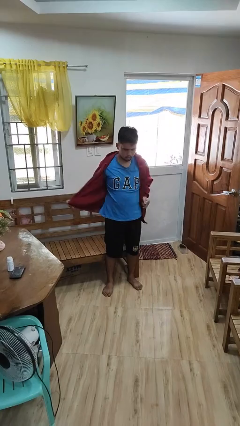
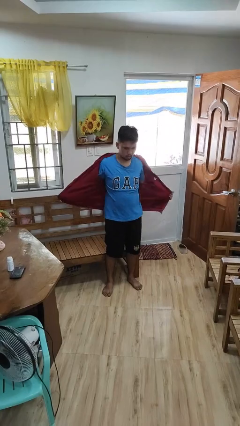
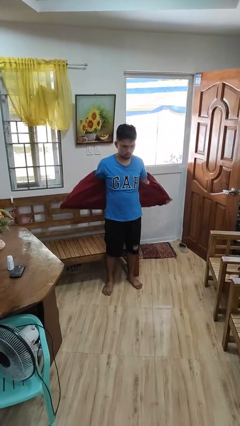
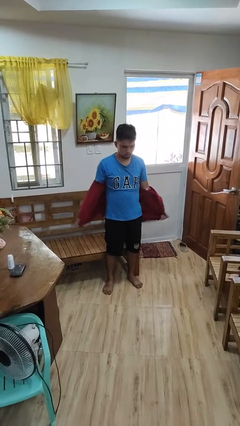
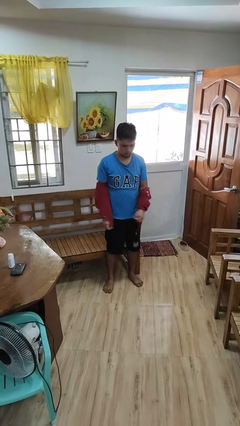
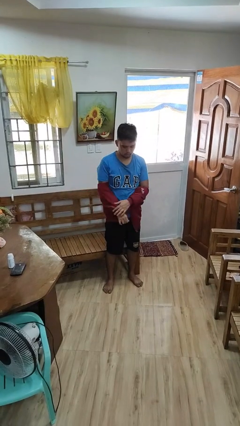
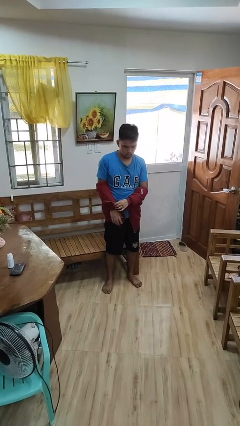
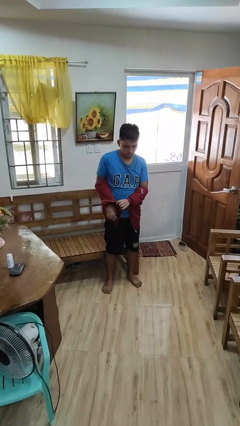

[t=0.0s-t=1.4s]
person takes off jacket

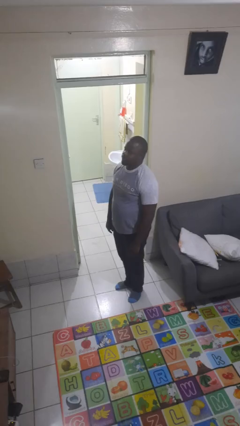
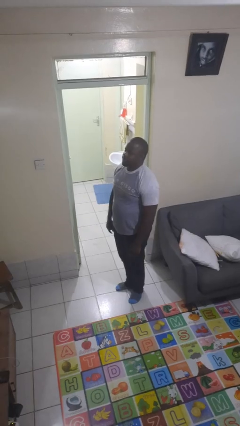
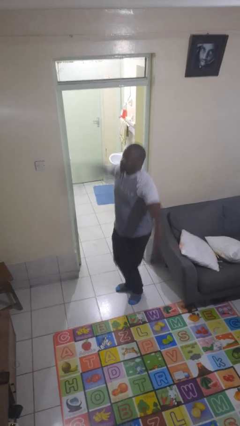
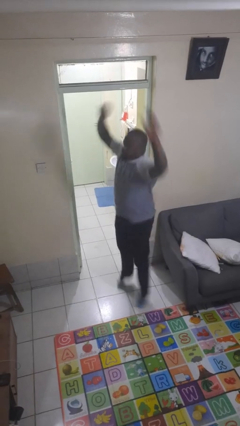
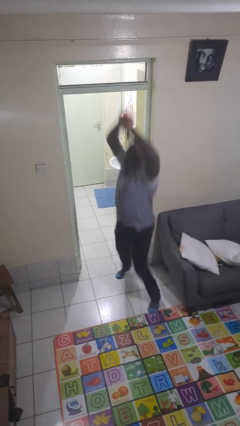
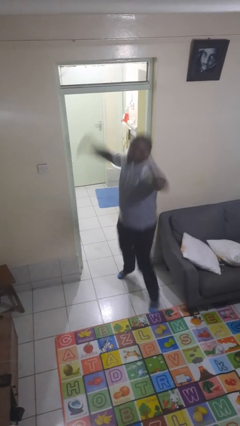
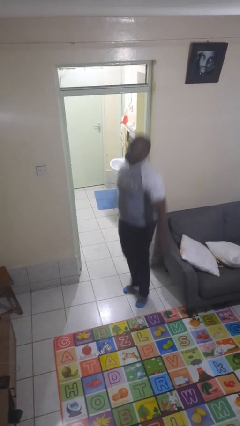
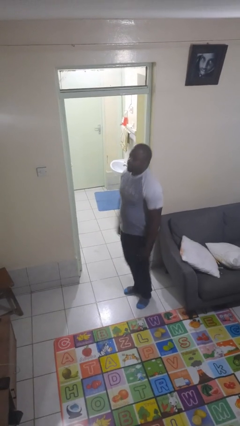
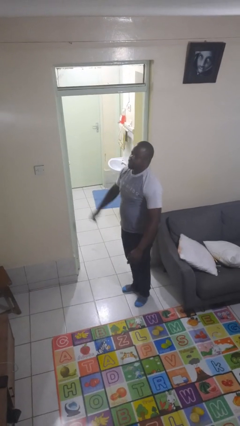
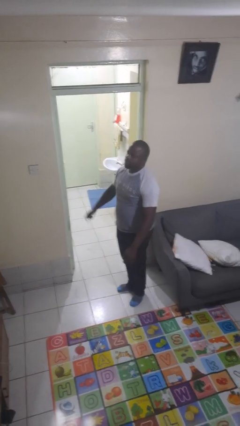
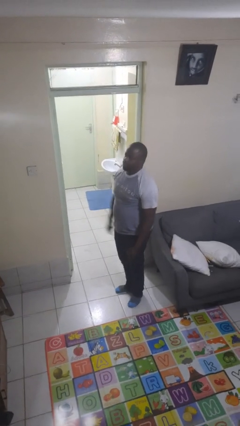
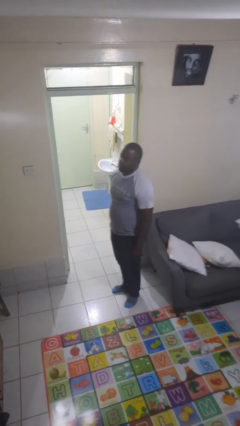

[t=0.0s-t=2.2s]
person exercises with jumping jacks

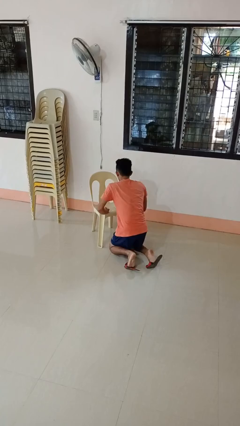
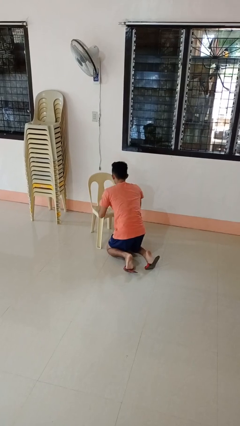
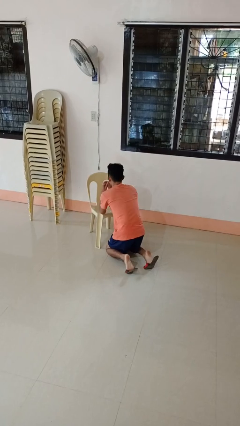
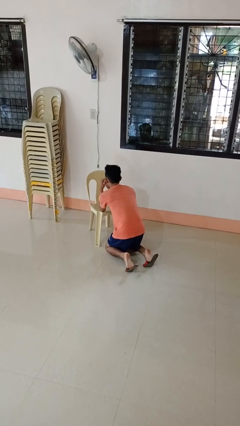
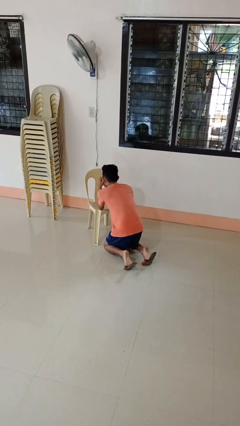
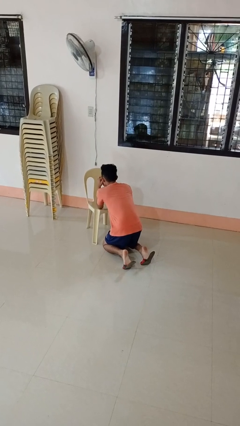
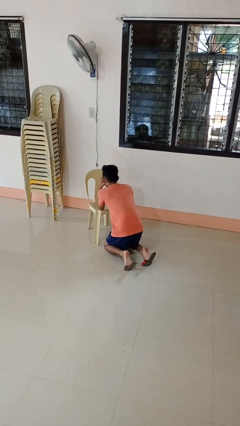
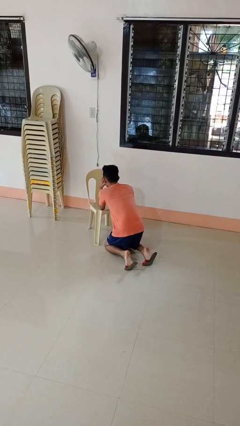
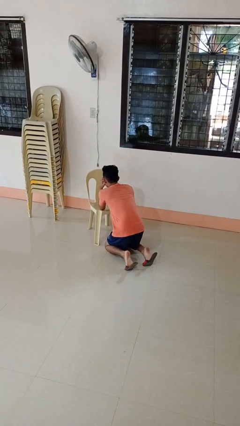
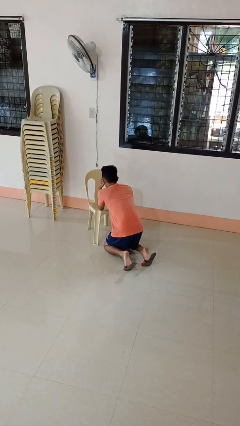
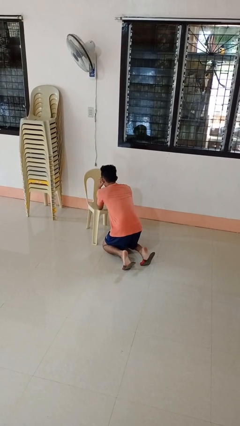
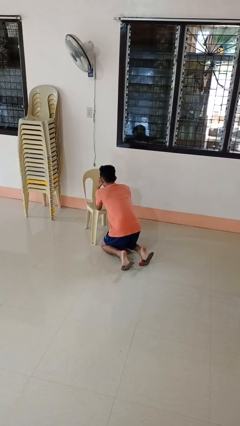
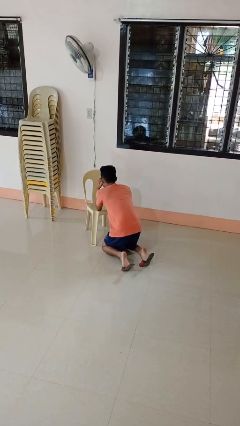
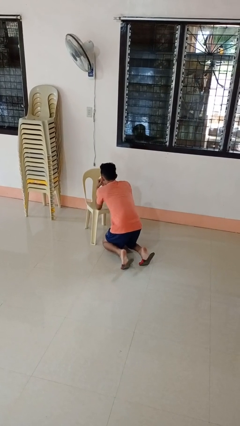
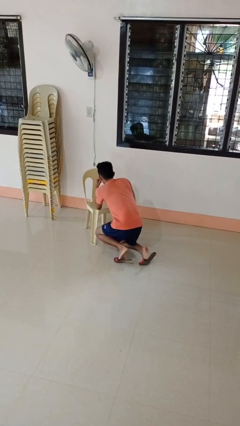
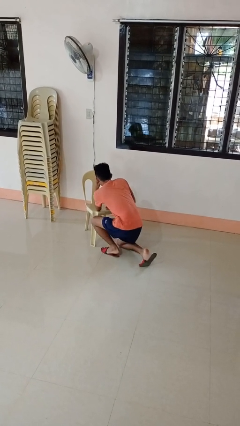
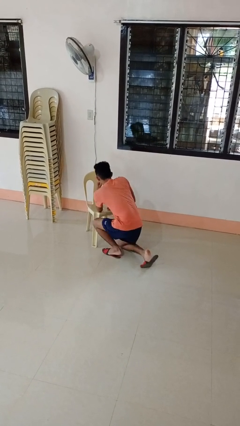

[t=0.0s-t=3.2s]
person prays

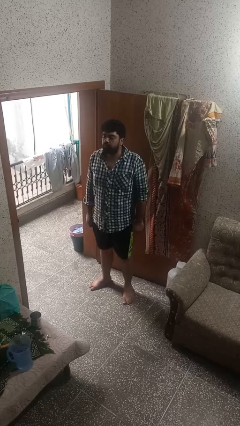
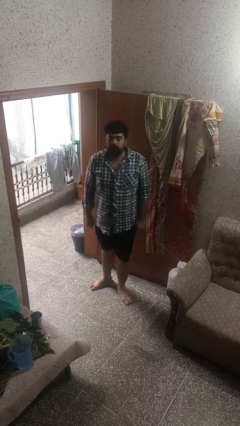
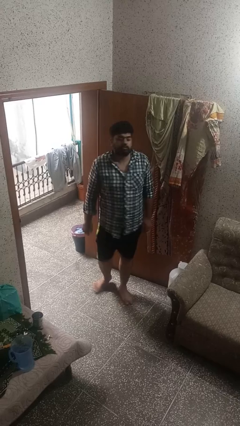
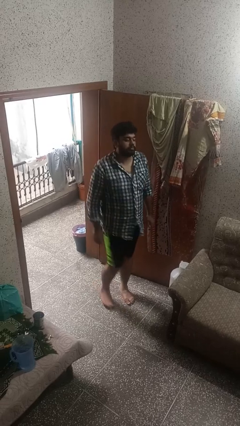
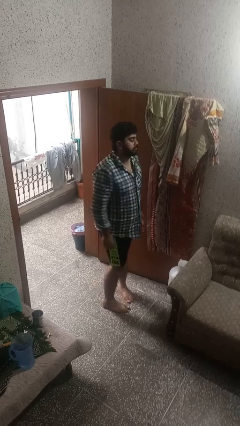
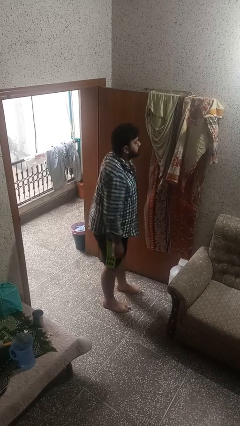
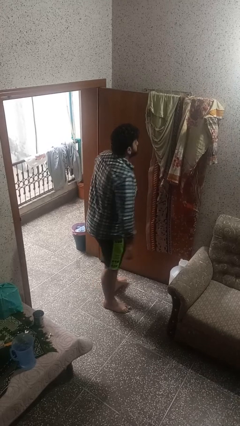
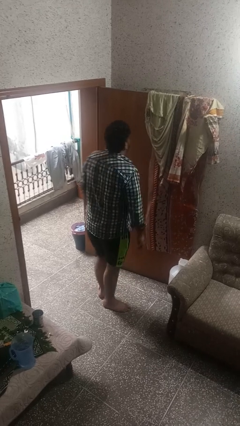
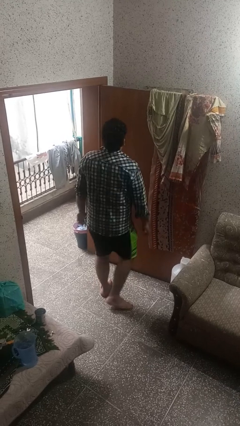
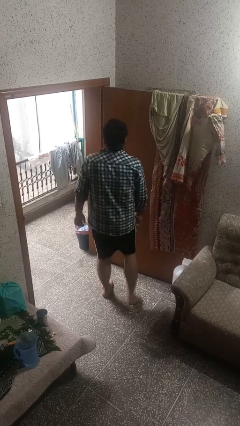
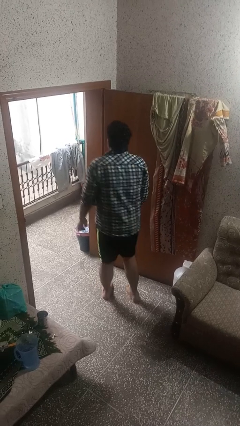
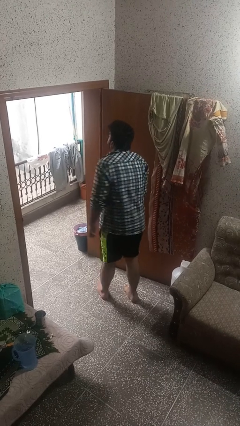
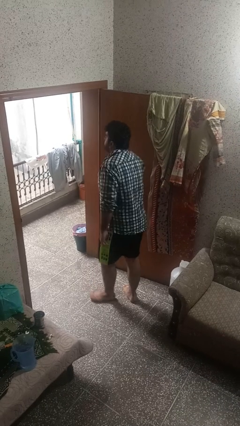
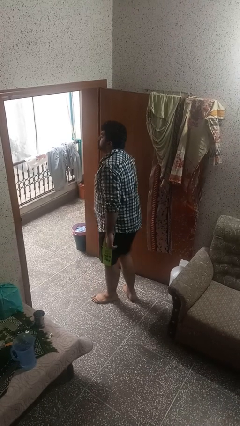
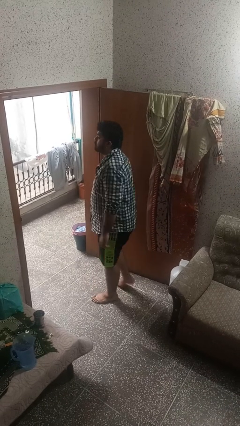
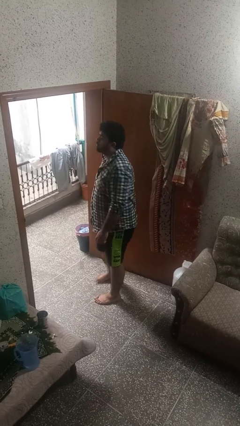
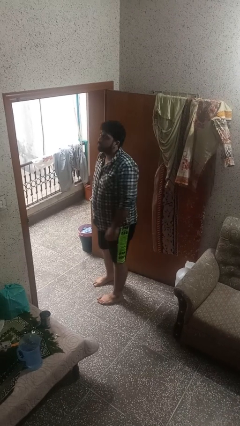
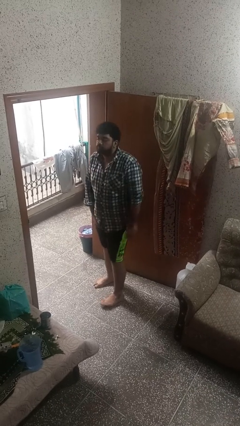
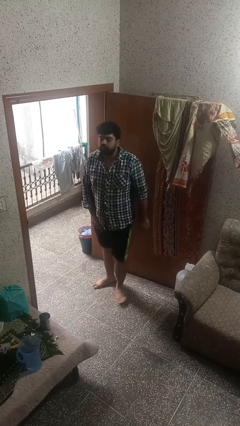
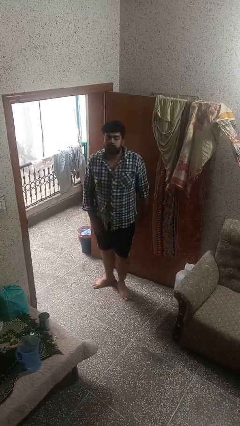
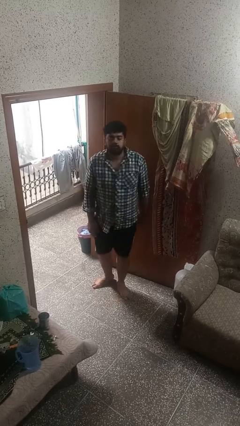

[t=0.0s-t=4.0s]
person twirls

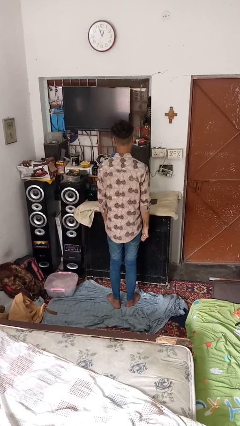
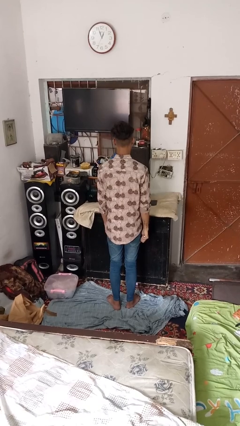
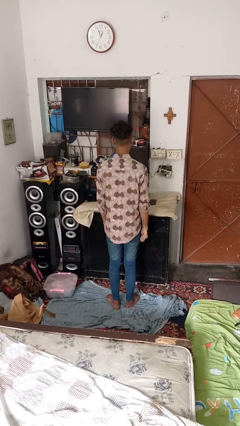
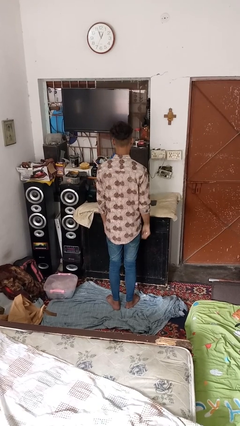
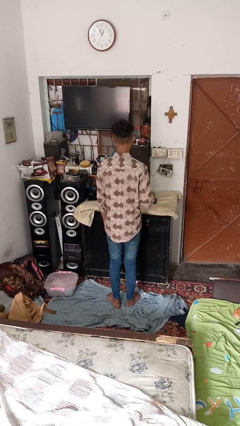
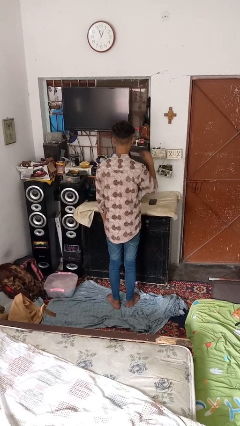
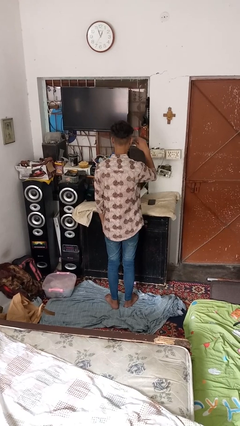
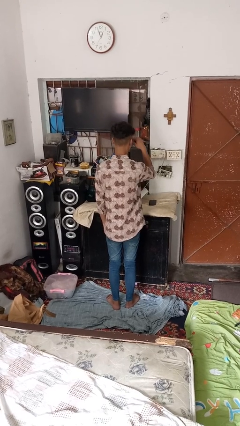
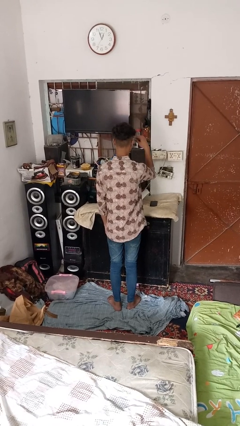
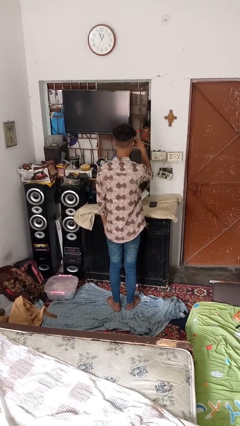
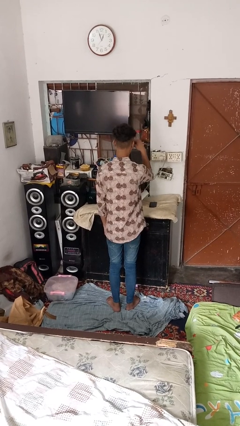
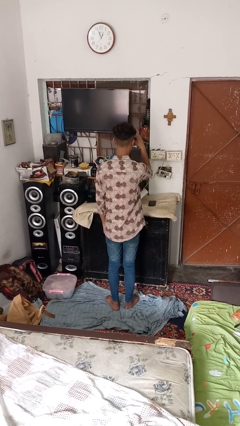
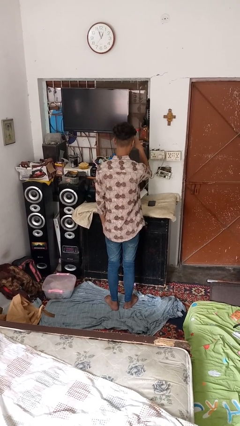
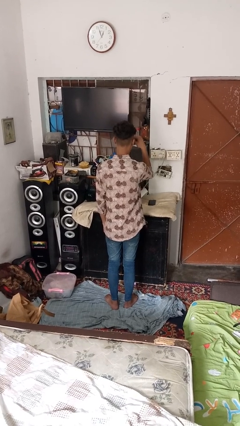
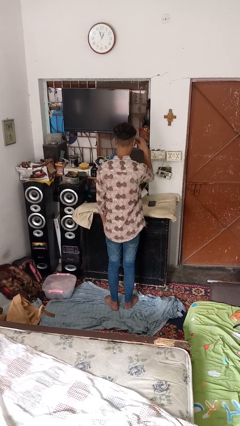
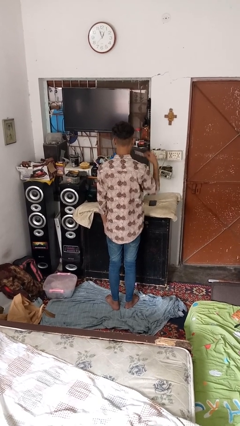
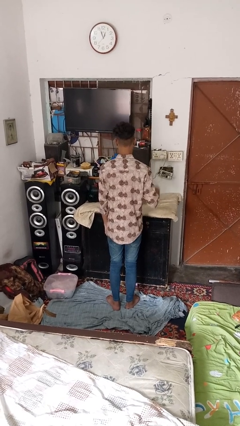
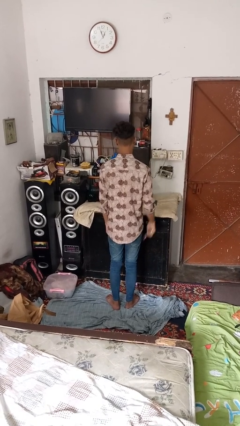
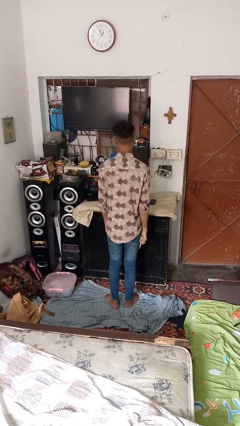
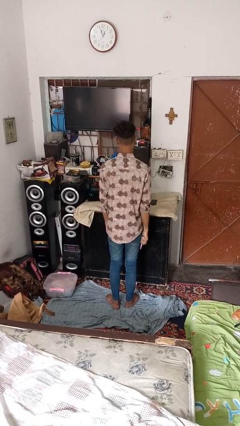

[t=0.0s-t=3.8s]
person applies eye makeup

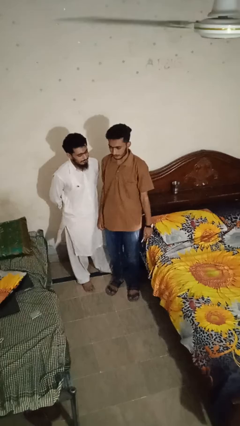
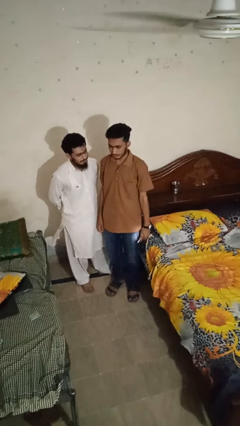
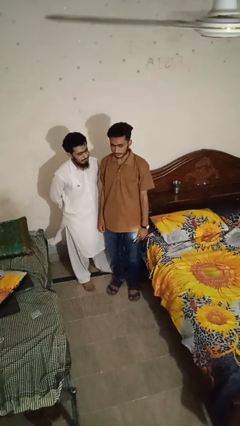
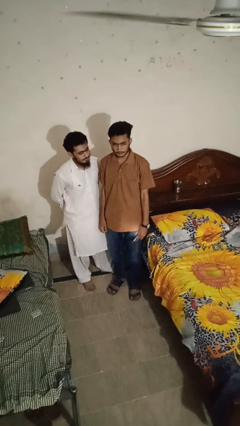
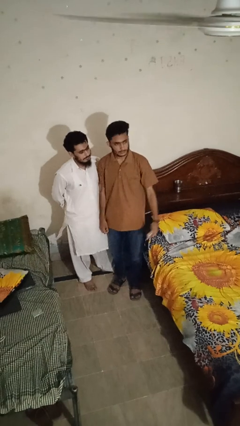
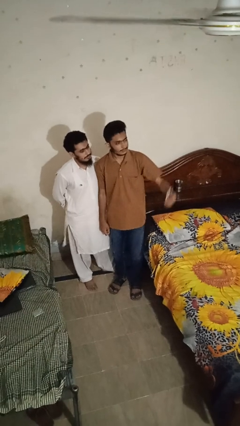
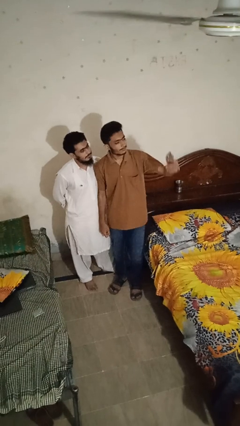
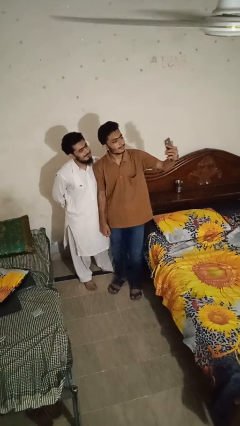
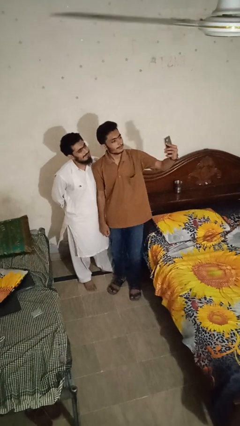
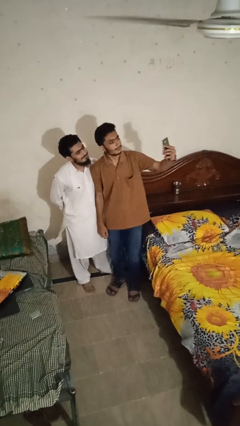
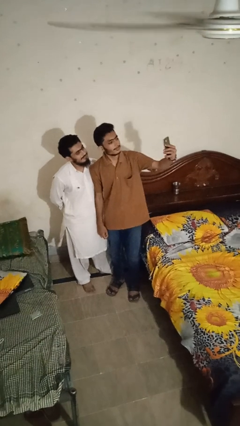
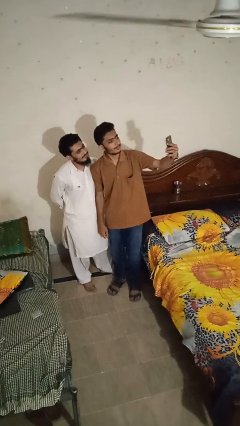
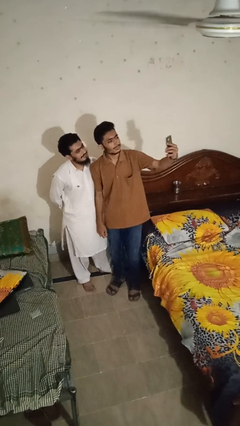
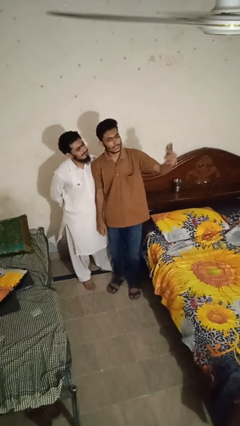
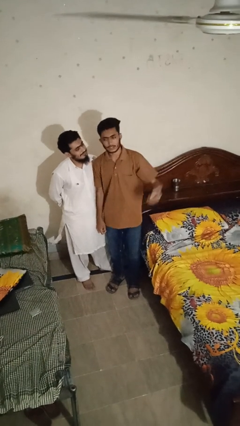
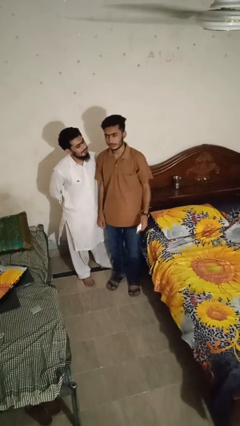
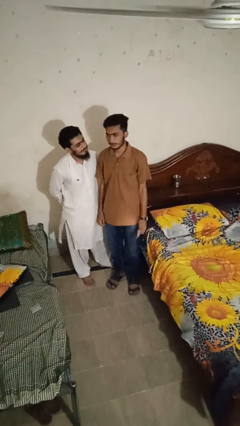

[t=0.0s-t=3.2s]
person takes selfie with person
